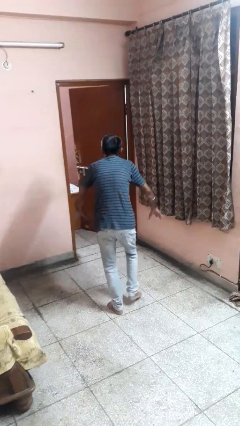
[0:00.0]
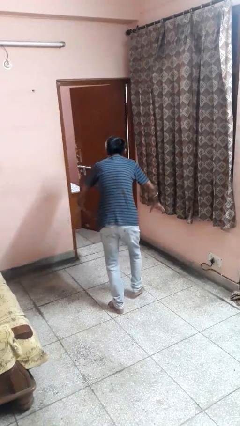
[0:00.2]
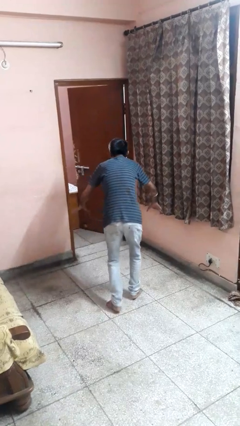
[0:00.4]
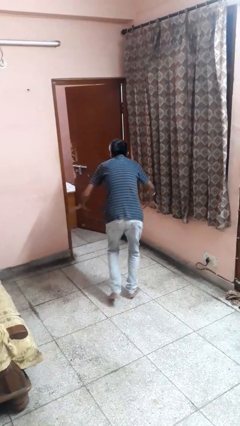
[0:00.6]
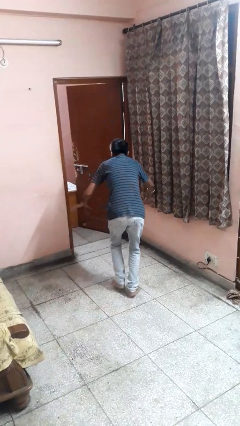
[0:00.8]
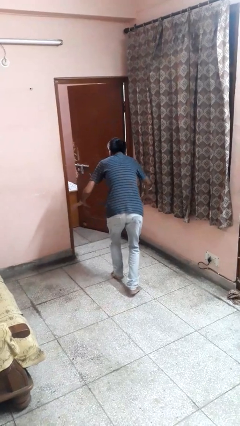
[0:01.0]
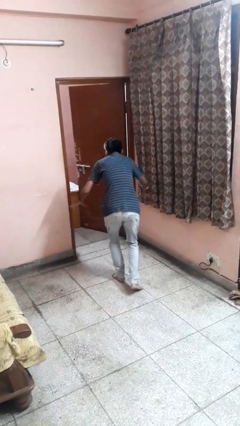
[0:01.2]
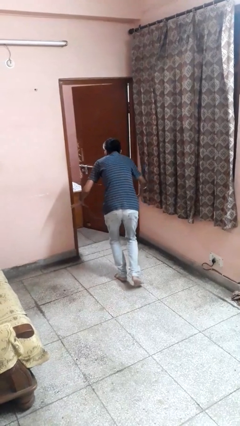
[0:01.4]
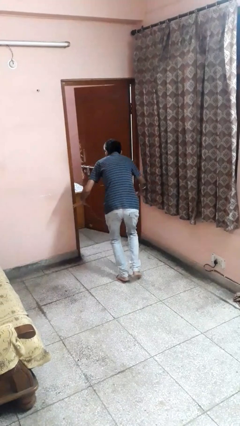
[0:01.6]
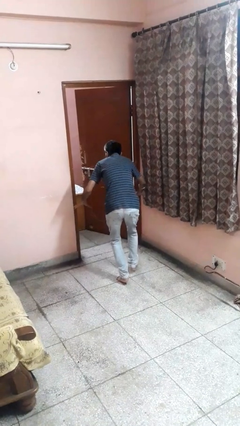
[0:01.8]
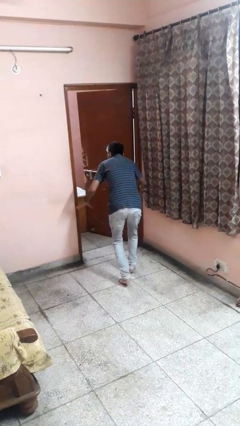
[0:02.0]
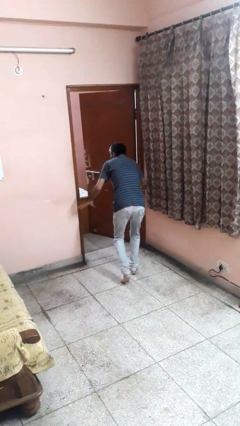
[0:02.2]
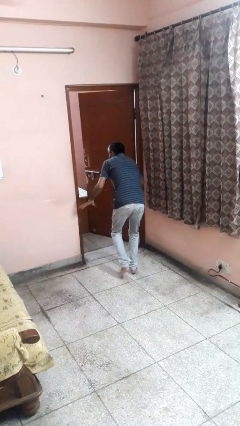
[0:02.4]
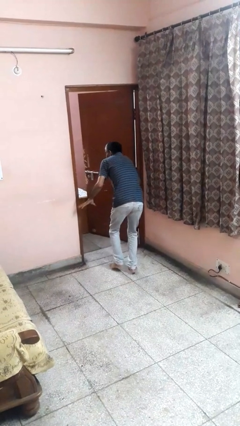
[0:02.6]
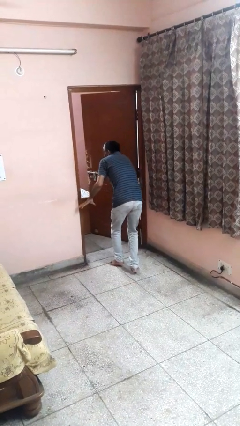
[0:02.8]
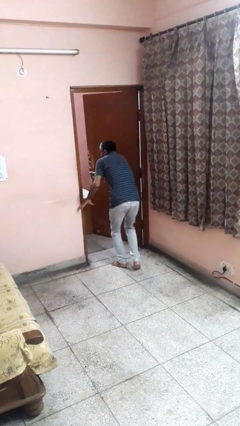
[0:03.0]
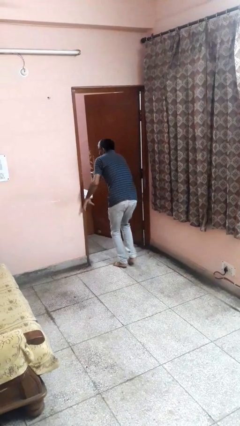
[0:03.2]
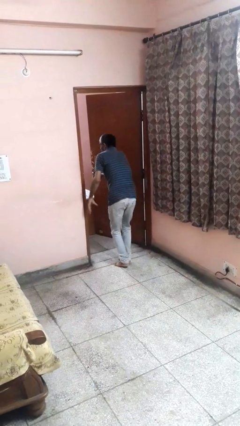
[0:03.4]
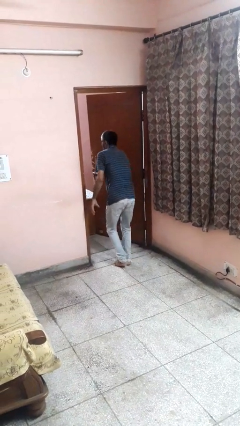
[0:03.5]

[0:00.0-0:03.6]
person walks tiptoe

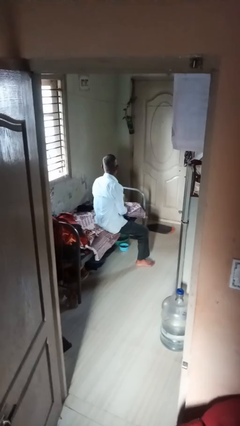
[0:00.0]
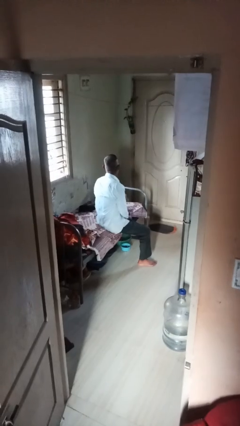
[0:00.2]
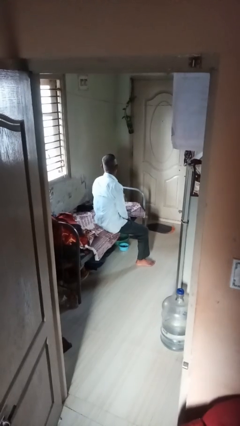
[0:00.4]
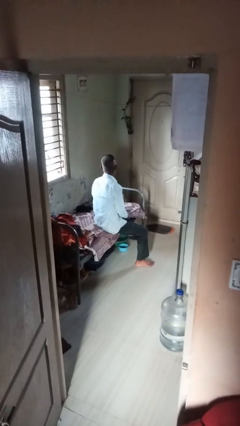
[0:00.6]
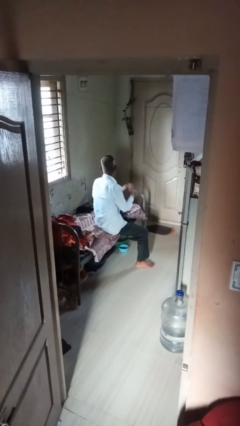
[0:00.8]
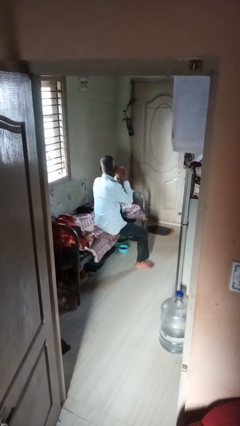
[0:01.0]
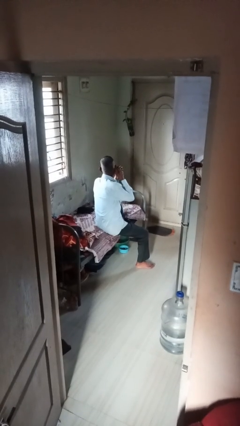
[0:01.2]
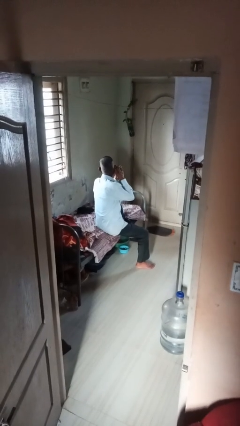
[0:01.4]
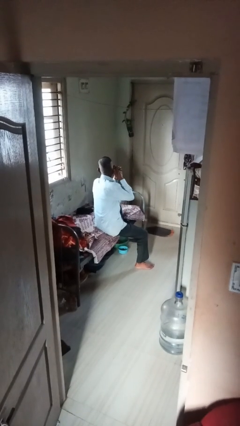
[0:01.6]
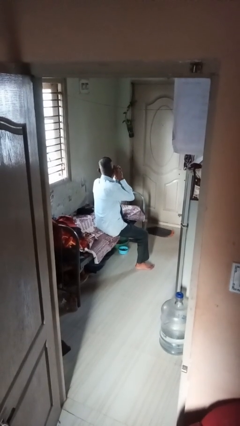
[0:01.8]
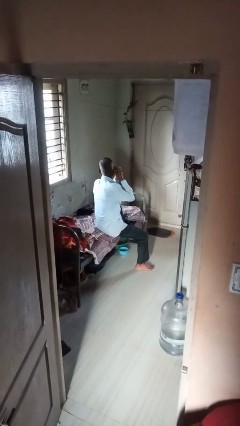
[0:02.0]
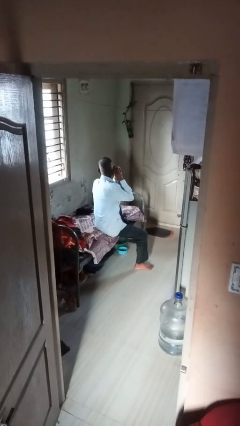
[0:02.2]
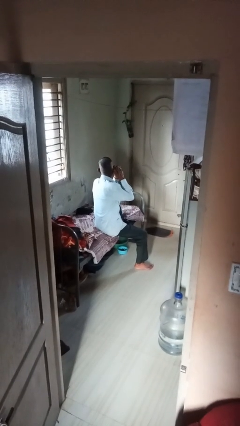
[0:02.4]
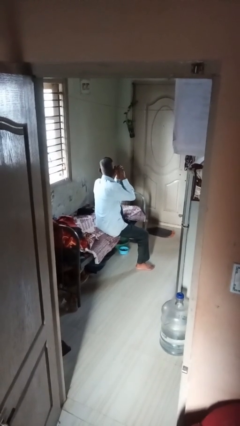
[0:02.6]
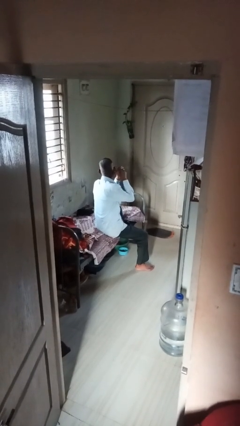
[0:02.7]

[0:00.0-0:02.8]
person takes off earrings

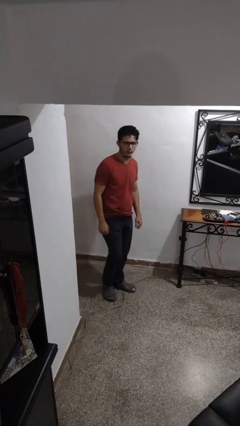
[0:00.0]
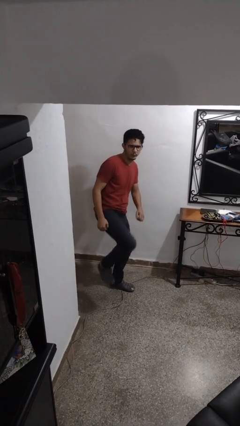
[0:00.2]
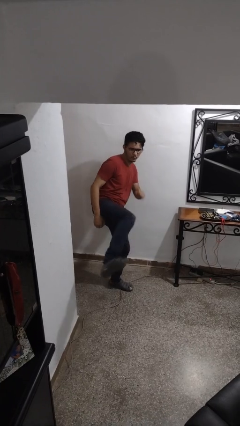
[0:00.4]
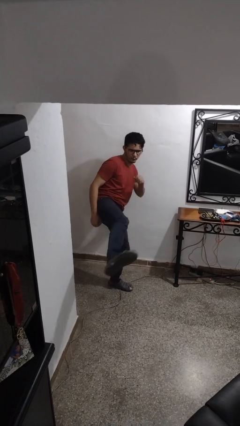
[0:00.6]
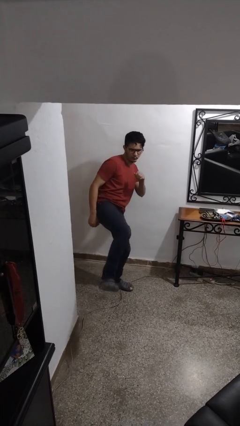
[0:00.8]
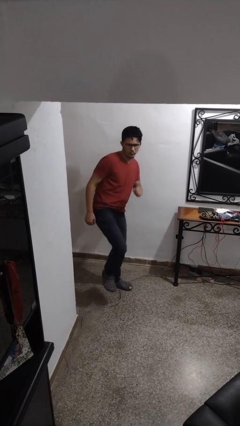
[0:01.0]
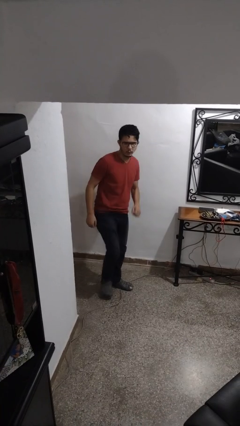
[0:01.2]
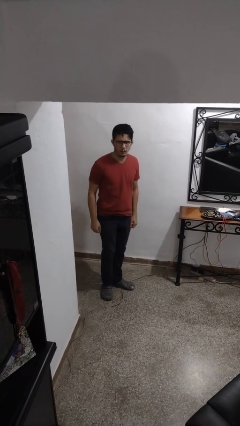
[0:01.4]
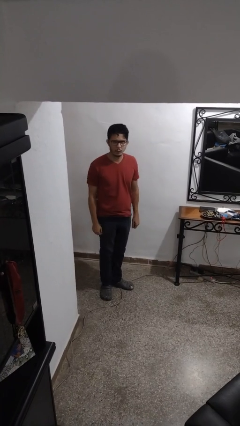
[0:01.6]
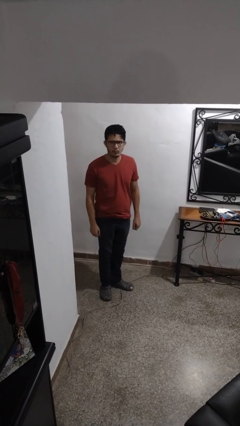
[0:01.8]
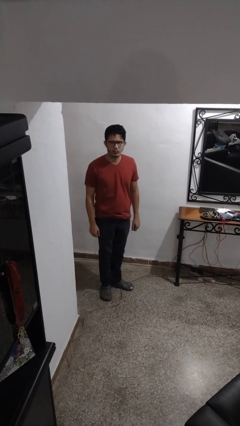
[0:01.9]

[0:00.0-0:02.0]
person karate kicks

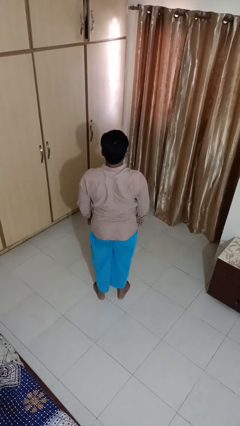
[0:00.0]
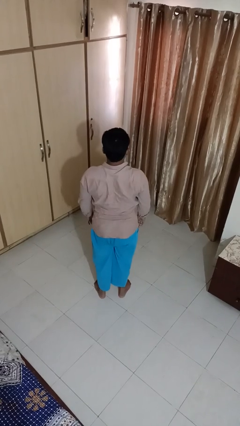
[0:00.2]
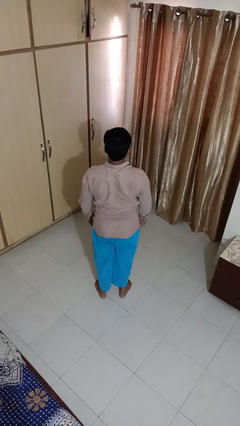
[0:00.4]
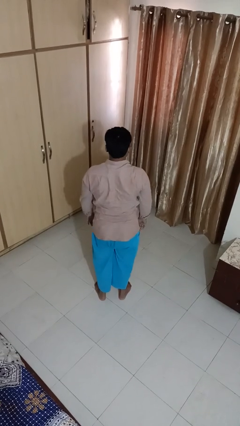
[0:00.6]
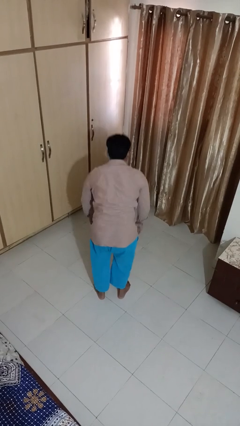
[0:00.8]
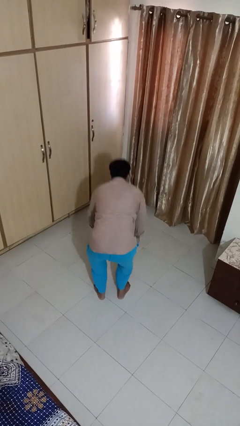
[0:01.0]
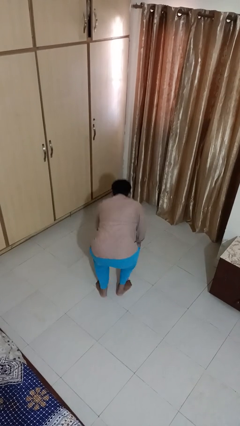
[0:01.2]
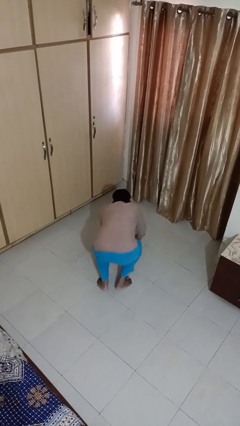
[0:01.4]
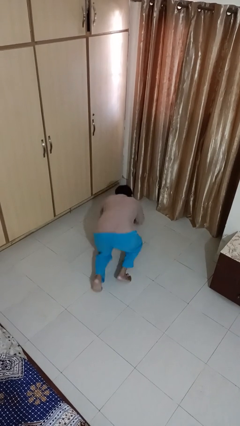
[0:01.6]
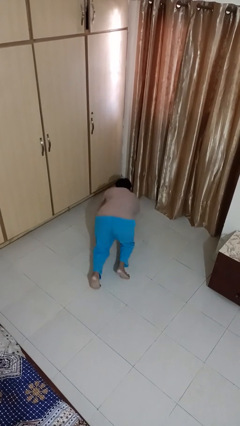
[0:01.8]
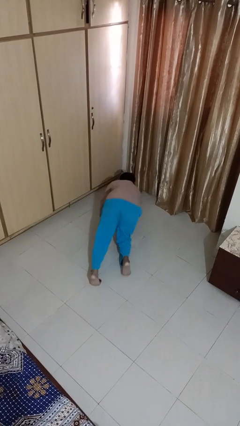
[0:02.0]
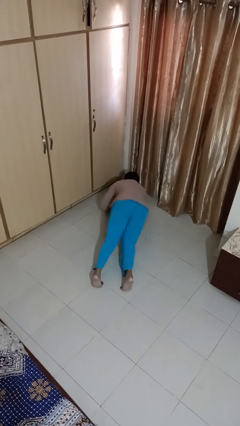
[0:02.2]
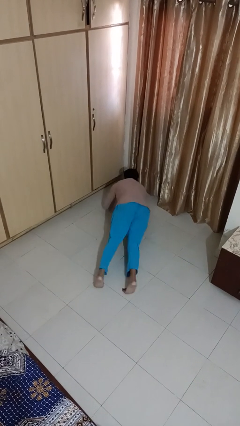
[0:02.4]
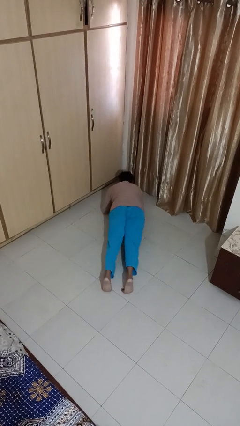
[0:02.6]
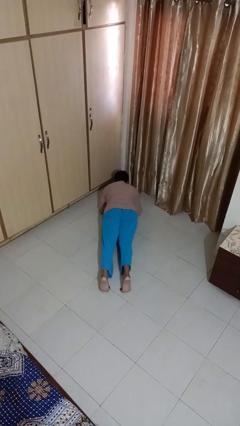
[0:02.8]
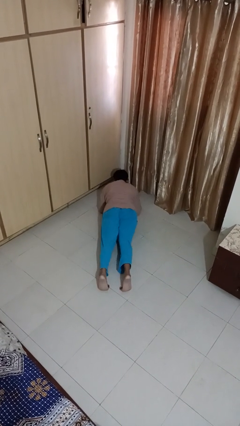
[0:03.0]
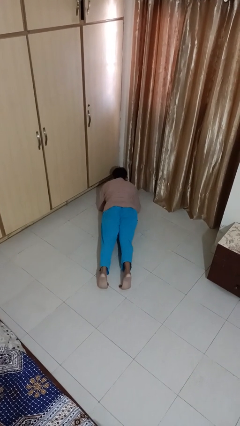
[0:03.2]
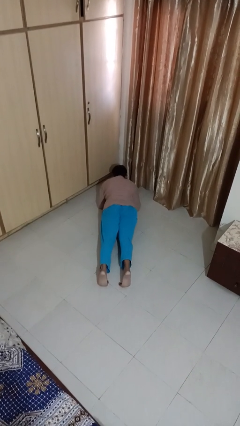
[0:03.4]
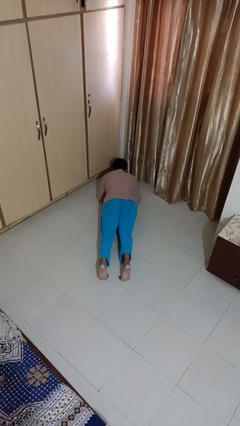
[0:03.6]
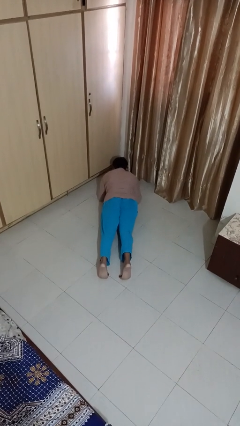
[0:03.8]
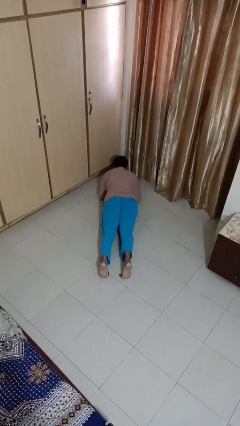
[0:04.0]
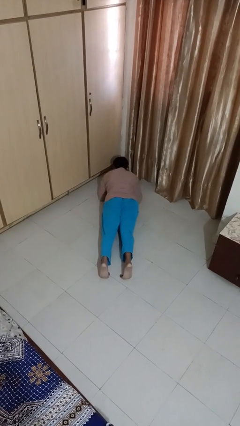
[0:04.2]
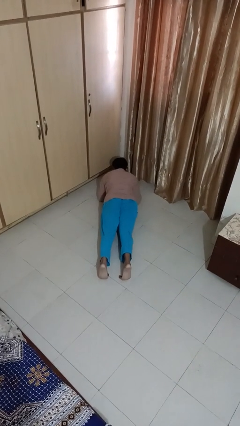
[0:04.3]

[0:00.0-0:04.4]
person exercises with plank

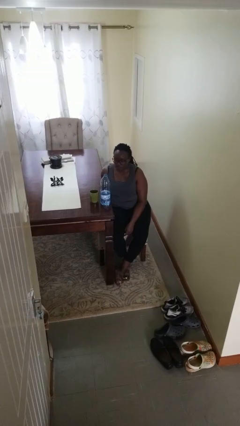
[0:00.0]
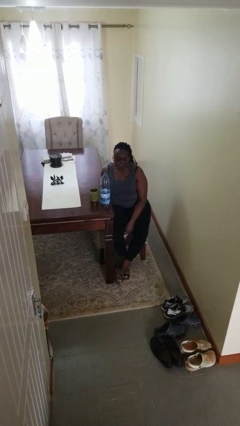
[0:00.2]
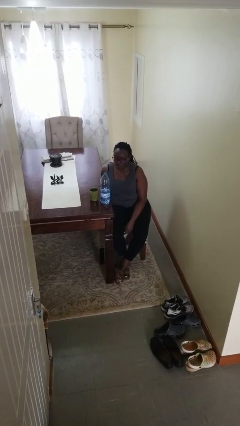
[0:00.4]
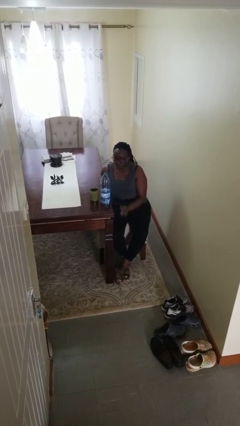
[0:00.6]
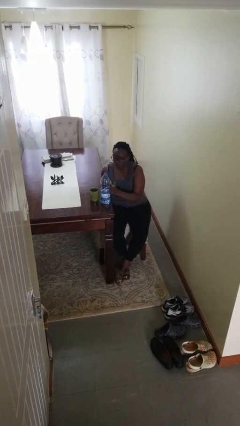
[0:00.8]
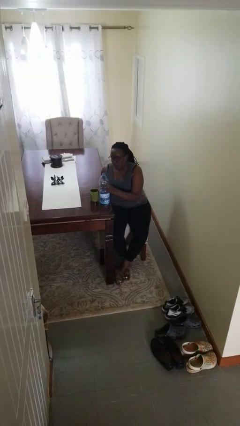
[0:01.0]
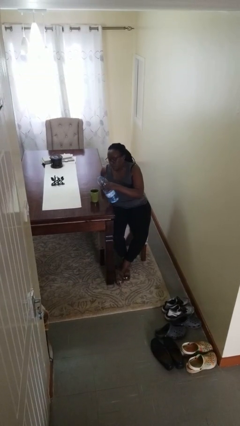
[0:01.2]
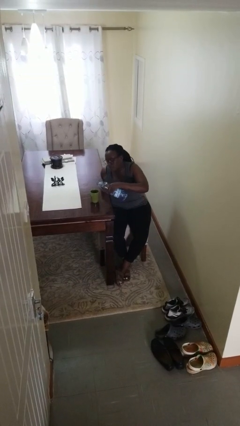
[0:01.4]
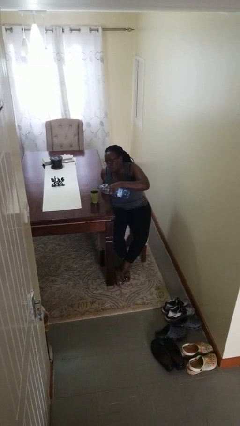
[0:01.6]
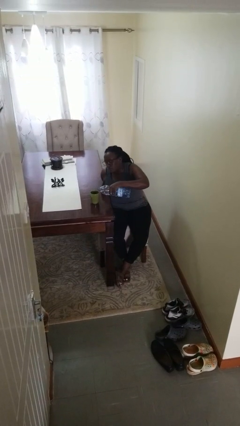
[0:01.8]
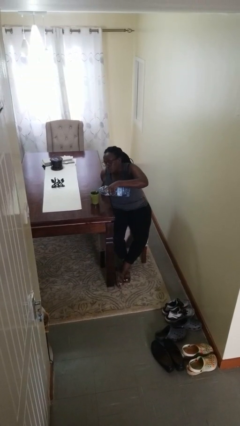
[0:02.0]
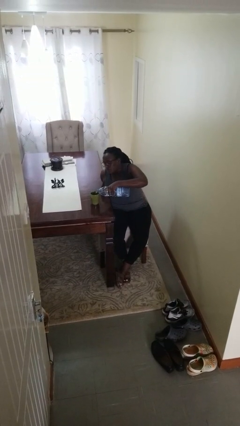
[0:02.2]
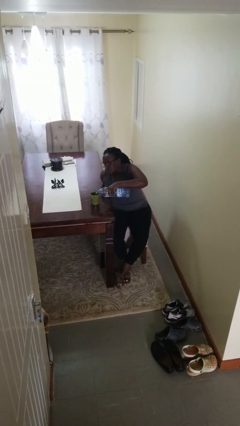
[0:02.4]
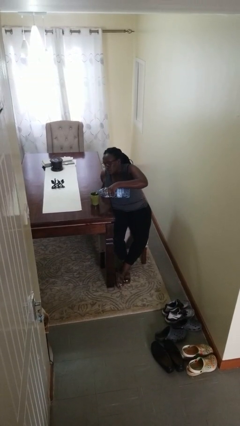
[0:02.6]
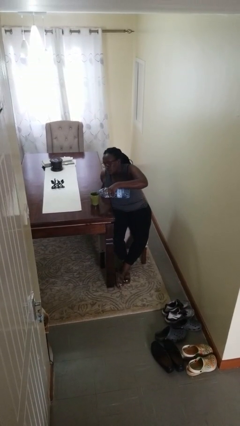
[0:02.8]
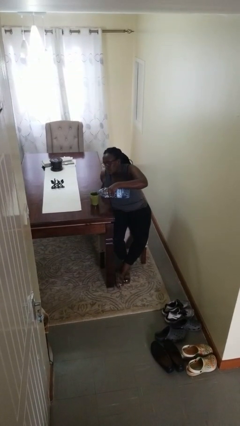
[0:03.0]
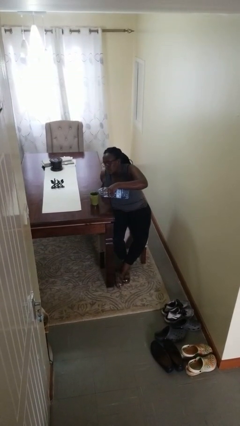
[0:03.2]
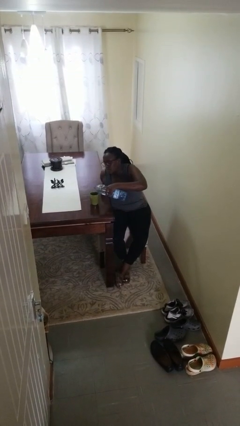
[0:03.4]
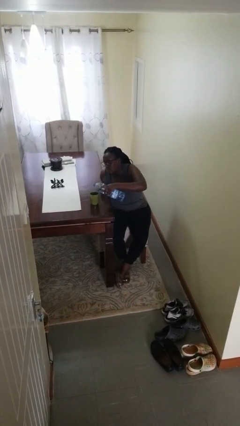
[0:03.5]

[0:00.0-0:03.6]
person pours liquid into cup

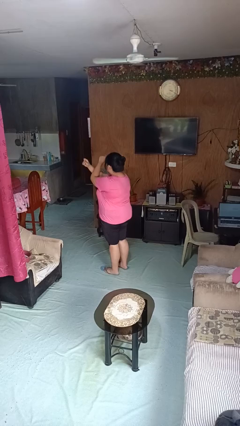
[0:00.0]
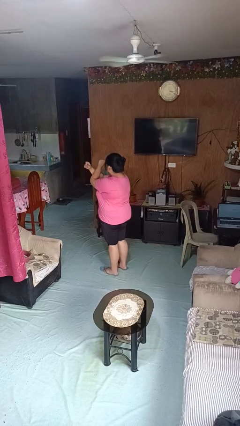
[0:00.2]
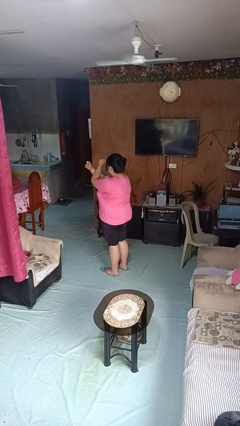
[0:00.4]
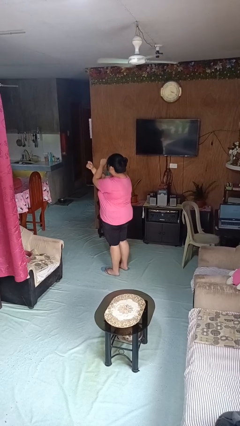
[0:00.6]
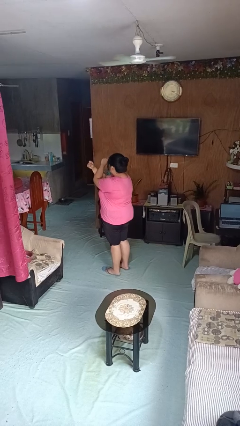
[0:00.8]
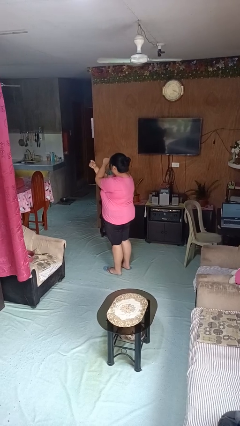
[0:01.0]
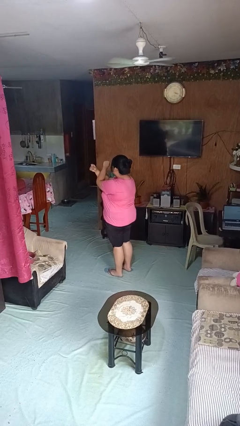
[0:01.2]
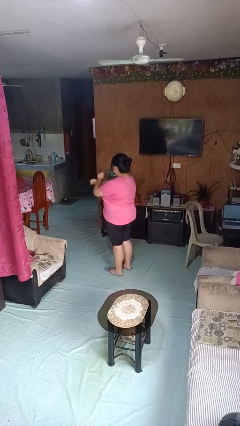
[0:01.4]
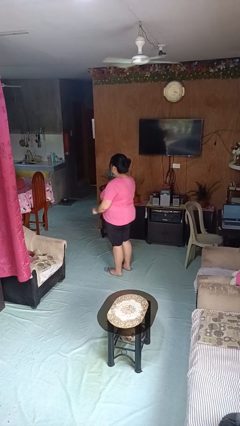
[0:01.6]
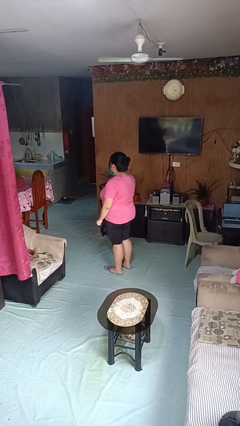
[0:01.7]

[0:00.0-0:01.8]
person gestures arms x
